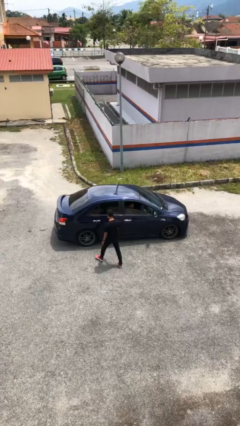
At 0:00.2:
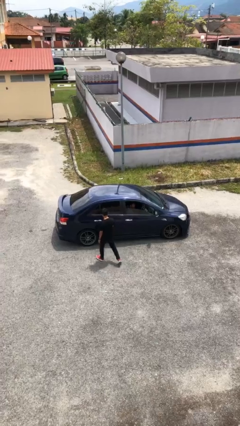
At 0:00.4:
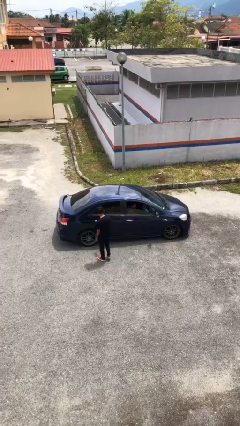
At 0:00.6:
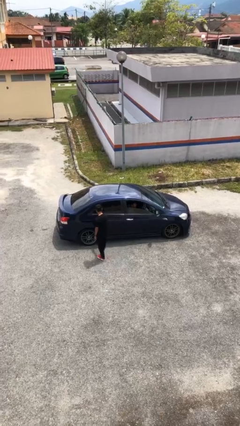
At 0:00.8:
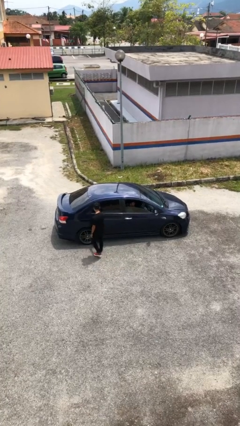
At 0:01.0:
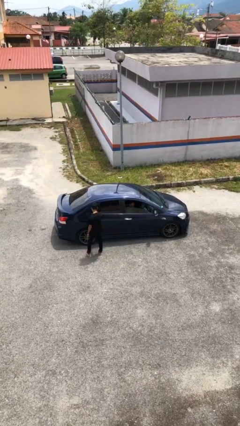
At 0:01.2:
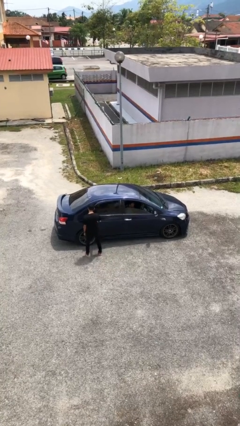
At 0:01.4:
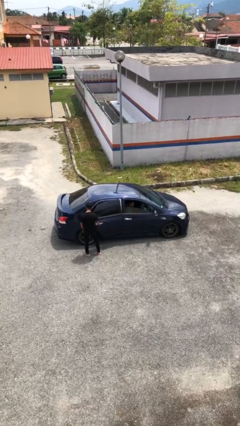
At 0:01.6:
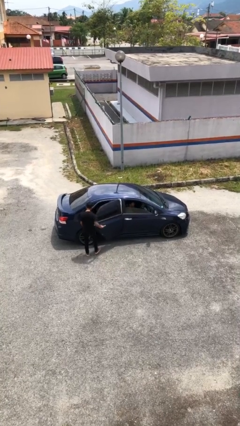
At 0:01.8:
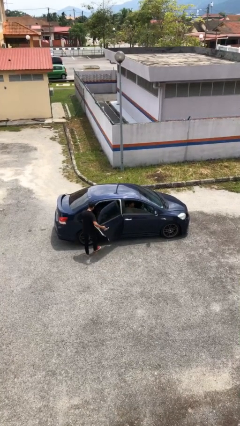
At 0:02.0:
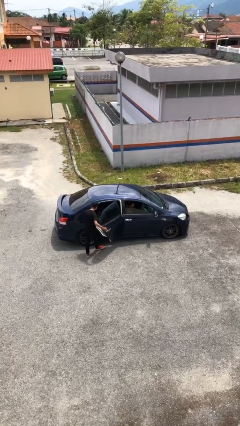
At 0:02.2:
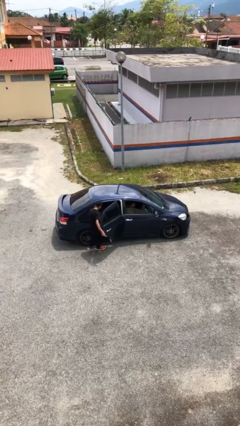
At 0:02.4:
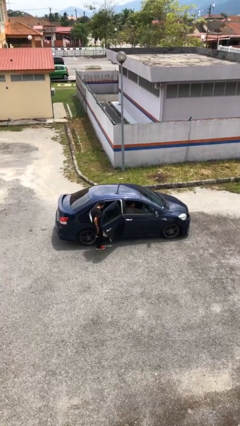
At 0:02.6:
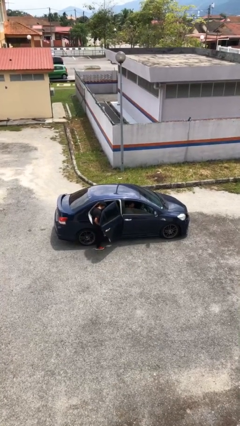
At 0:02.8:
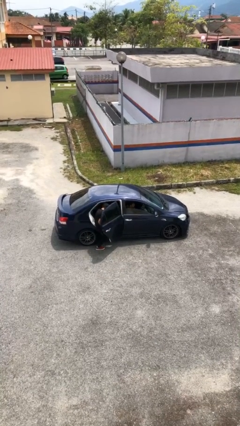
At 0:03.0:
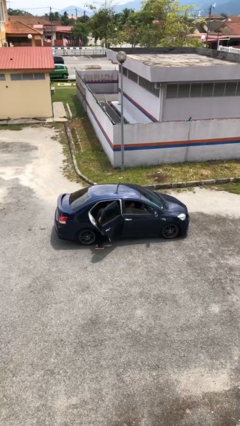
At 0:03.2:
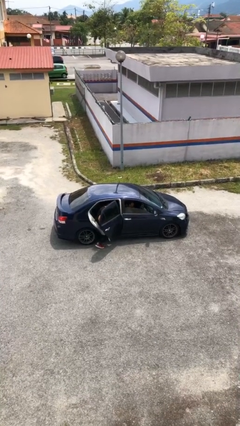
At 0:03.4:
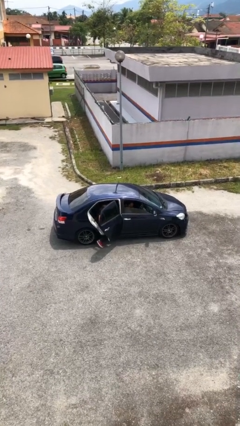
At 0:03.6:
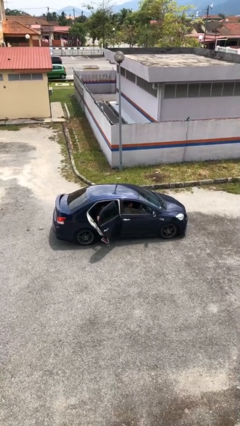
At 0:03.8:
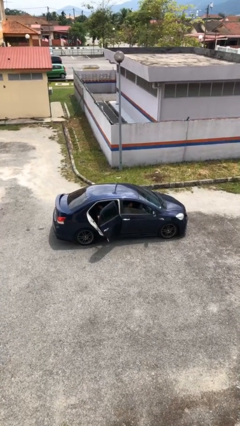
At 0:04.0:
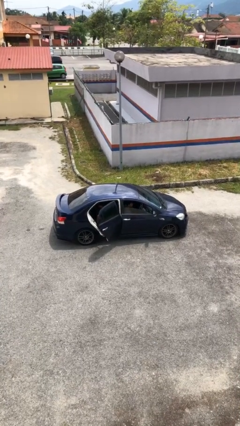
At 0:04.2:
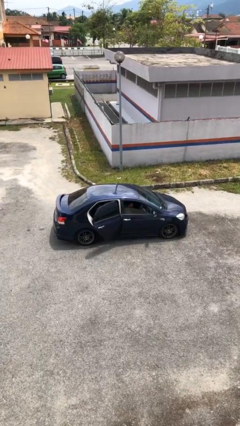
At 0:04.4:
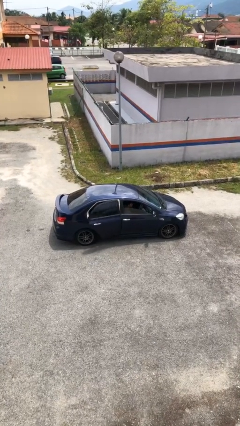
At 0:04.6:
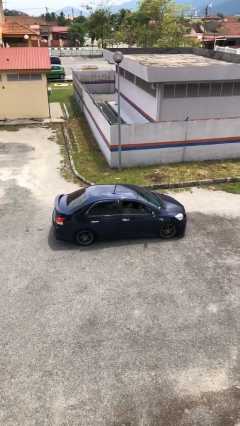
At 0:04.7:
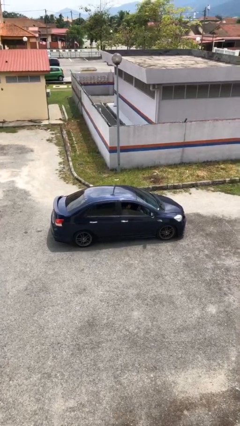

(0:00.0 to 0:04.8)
car picks up person

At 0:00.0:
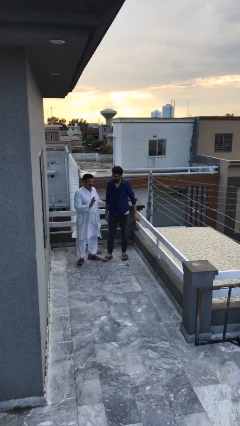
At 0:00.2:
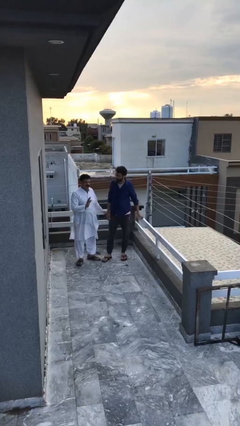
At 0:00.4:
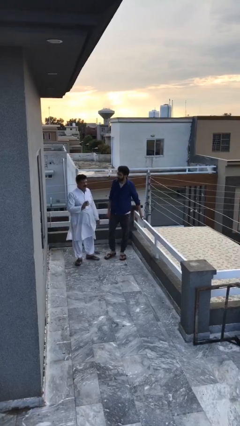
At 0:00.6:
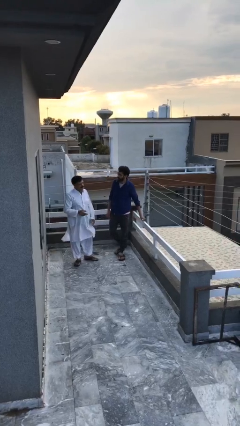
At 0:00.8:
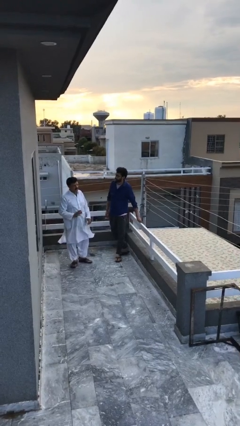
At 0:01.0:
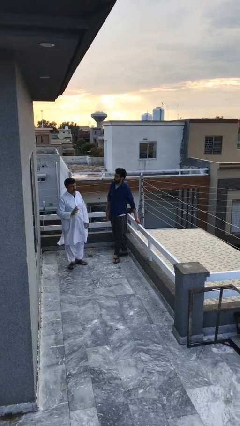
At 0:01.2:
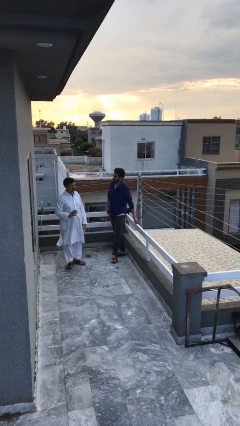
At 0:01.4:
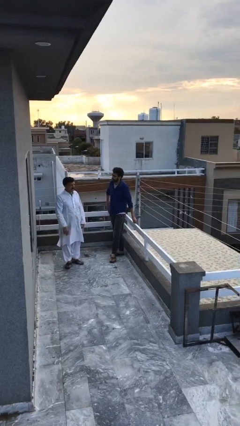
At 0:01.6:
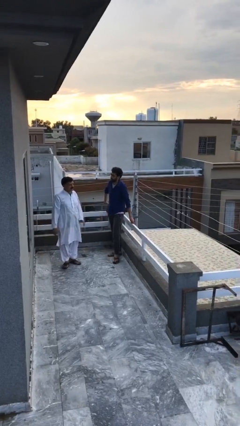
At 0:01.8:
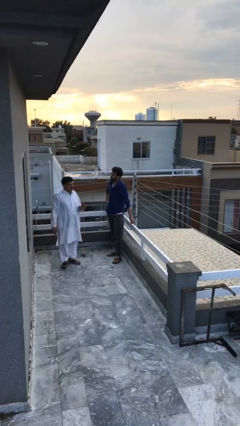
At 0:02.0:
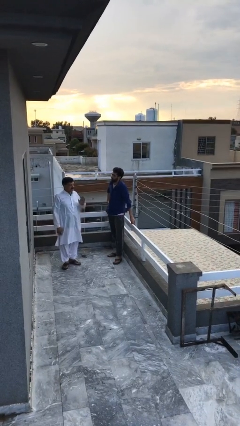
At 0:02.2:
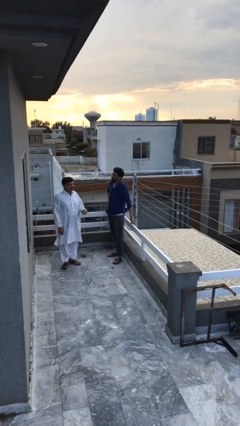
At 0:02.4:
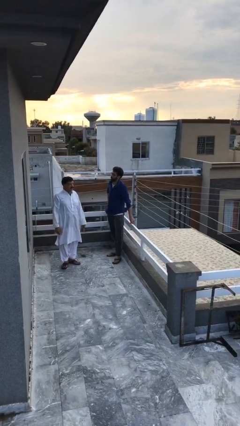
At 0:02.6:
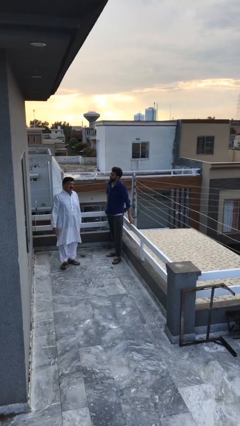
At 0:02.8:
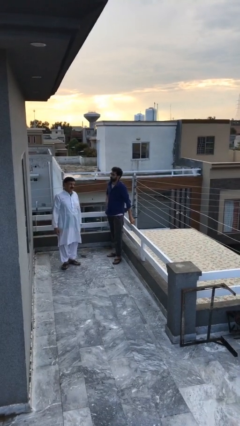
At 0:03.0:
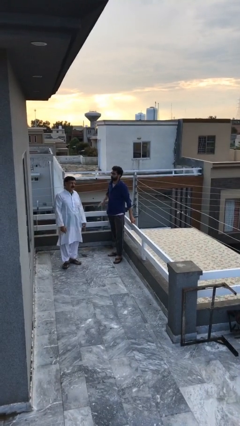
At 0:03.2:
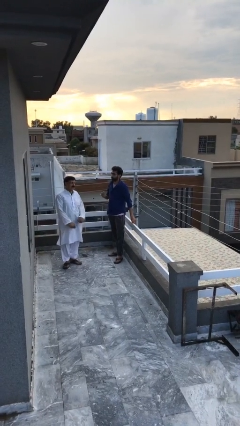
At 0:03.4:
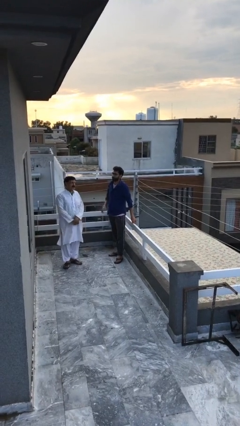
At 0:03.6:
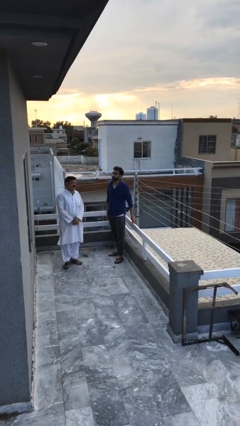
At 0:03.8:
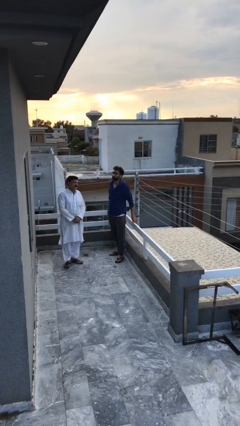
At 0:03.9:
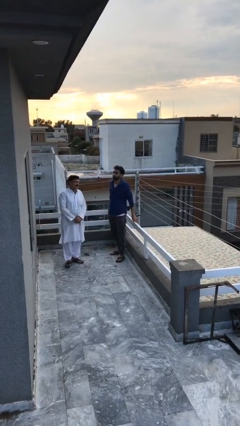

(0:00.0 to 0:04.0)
person talks to person

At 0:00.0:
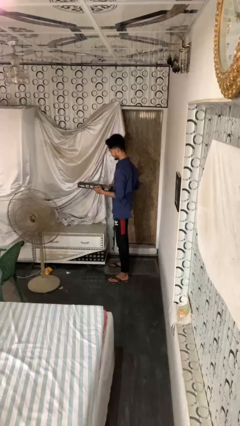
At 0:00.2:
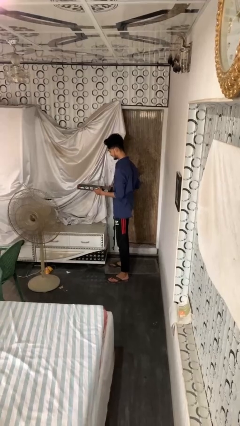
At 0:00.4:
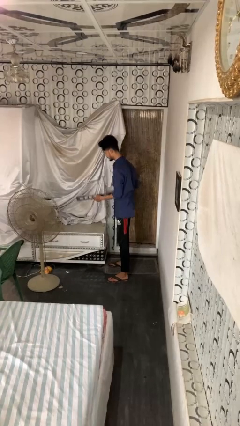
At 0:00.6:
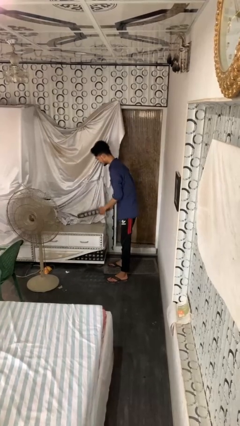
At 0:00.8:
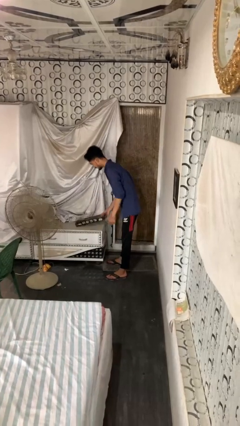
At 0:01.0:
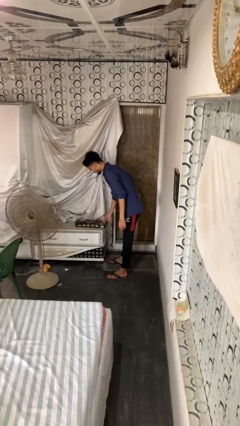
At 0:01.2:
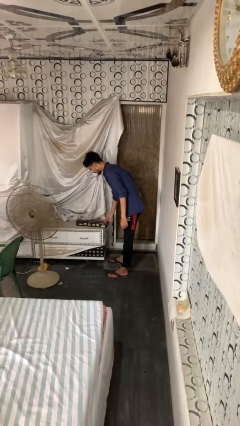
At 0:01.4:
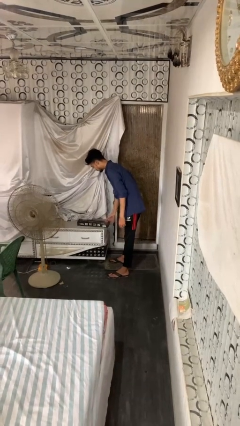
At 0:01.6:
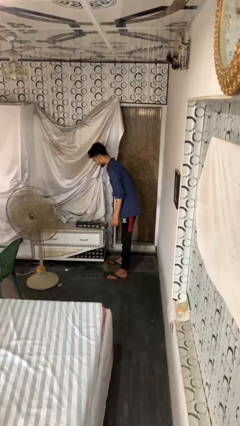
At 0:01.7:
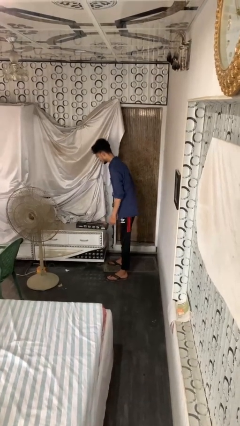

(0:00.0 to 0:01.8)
person puts down object on countertop

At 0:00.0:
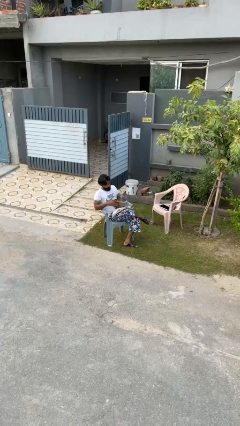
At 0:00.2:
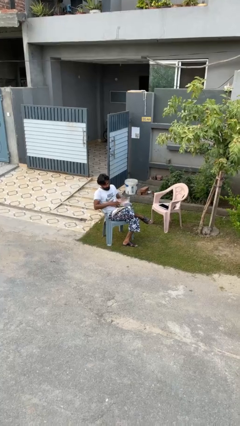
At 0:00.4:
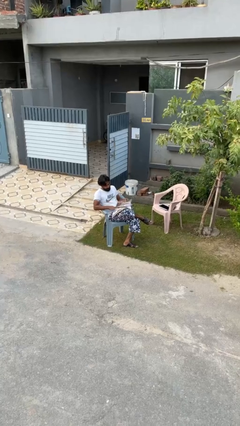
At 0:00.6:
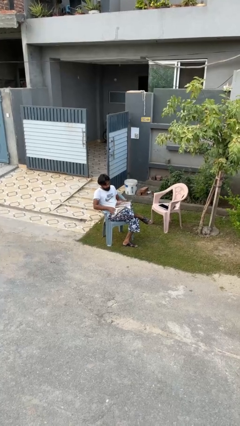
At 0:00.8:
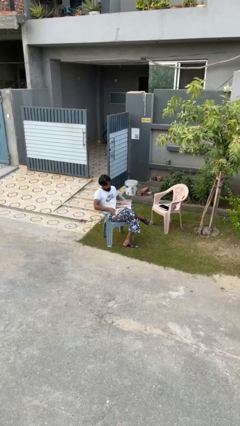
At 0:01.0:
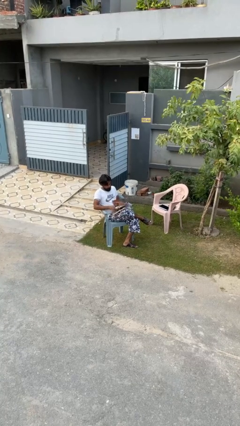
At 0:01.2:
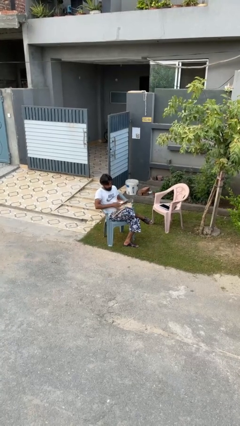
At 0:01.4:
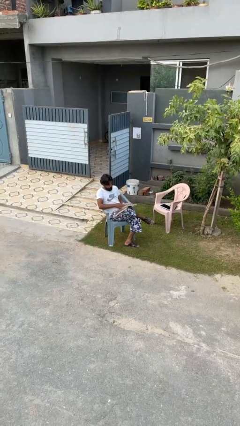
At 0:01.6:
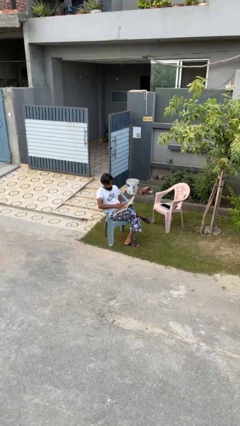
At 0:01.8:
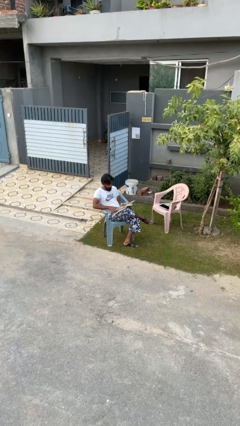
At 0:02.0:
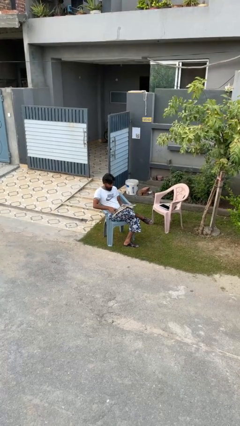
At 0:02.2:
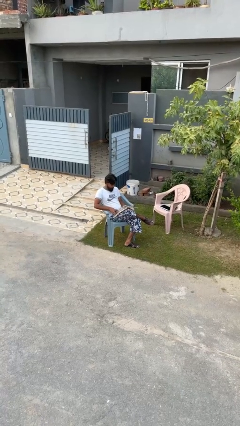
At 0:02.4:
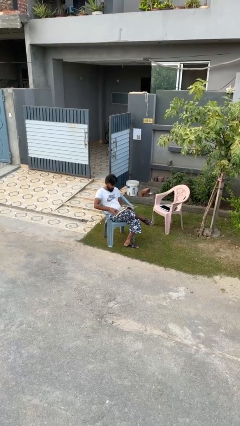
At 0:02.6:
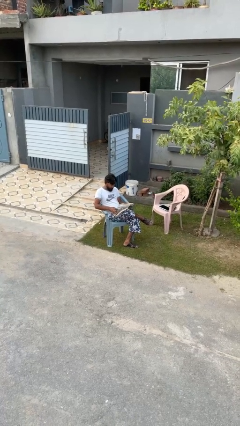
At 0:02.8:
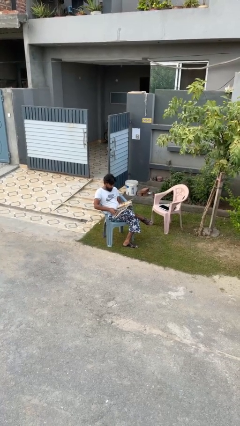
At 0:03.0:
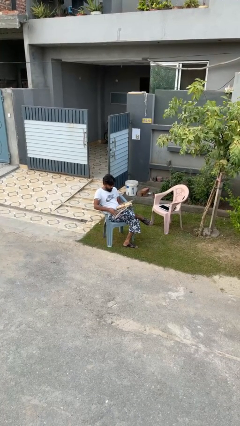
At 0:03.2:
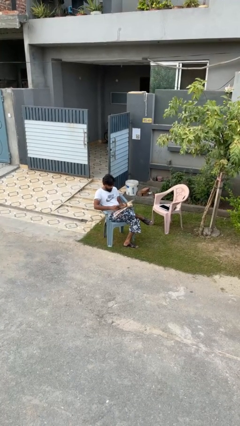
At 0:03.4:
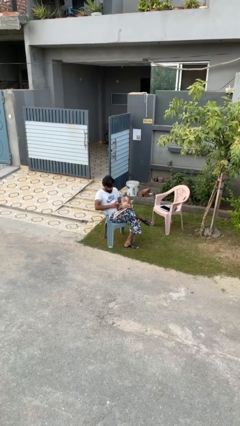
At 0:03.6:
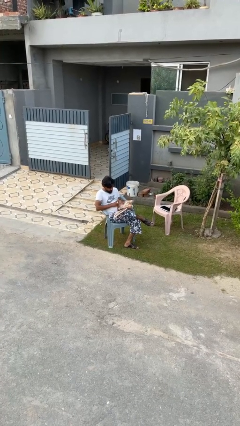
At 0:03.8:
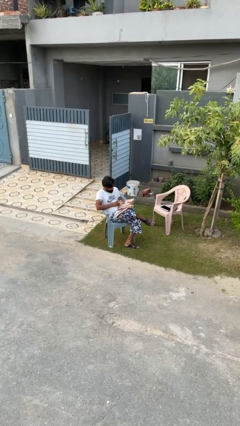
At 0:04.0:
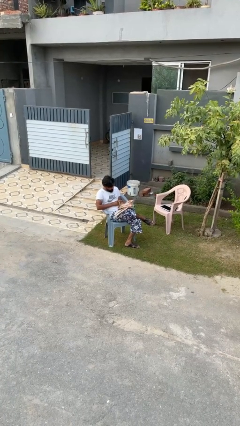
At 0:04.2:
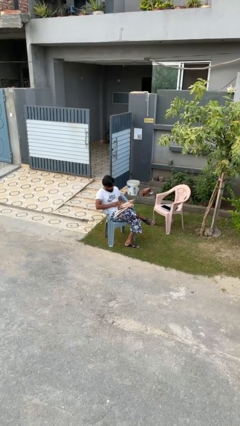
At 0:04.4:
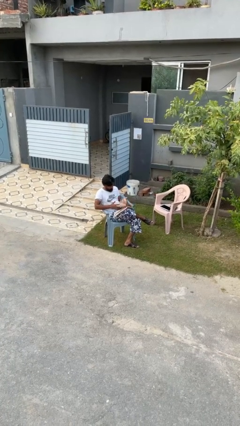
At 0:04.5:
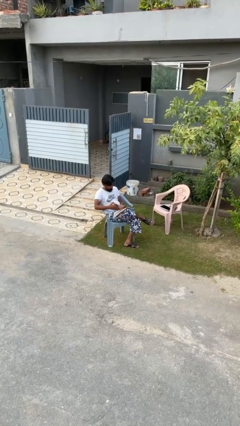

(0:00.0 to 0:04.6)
person reads magazine

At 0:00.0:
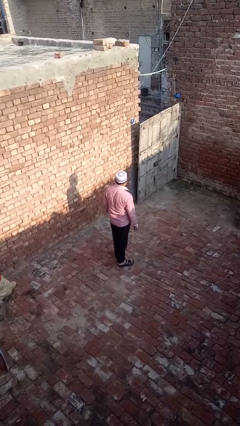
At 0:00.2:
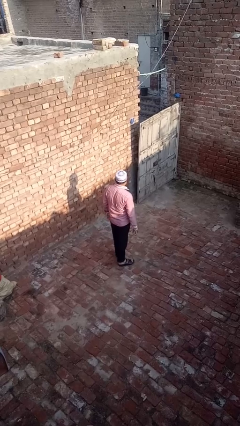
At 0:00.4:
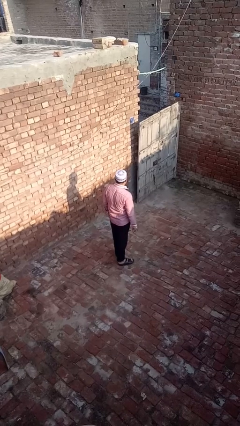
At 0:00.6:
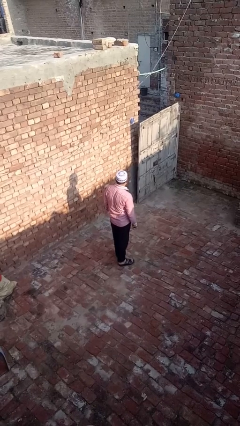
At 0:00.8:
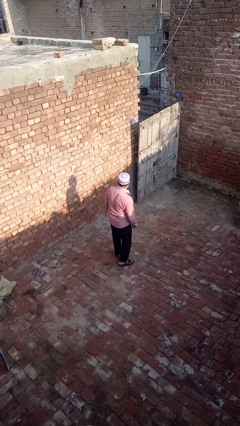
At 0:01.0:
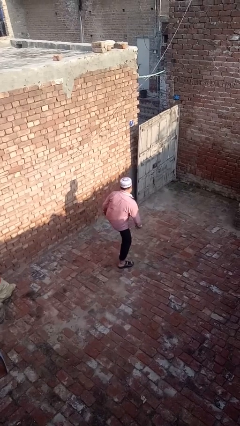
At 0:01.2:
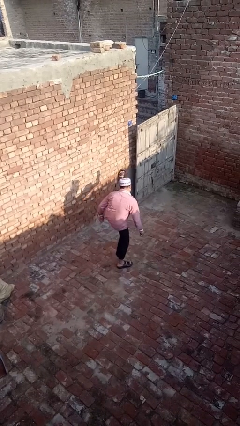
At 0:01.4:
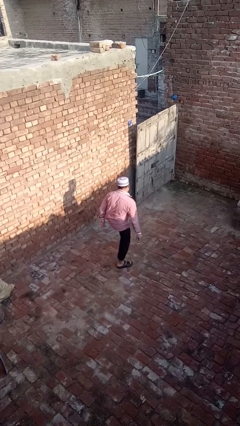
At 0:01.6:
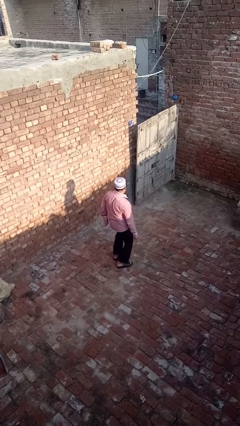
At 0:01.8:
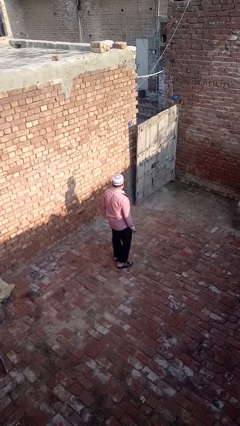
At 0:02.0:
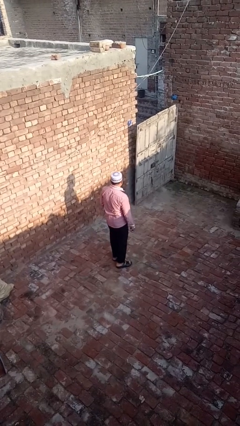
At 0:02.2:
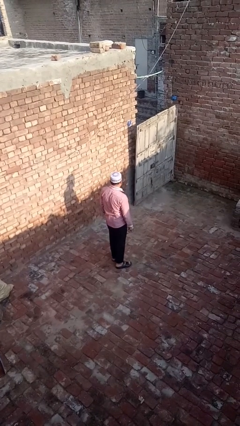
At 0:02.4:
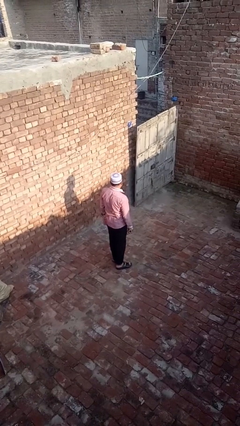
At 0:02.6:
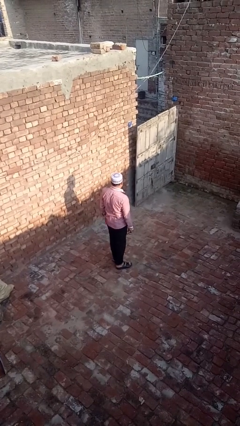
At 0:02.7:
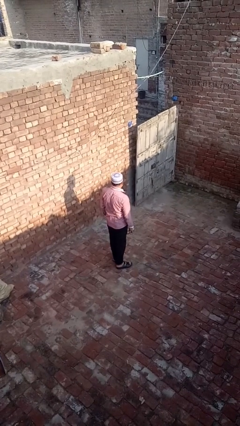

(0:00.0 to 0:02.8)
person karate kicks
